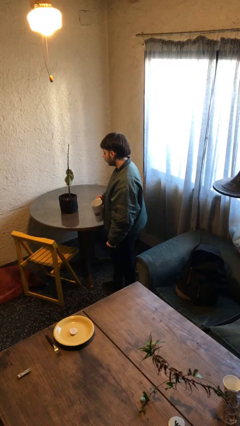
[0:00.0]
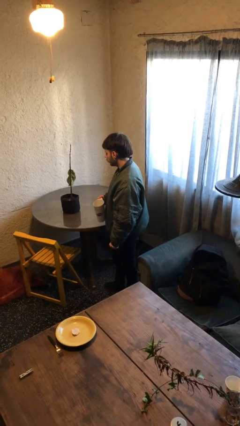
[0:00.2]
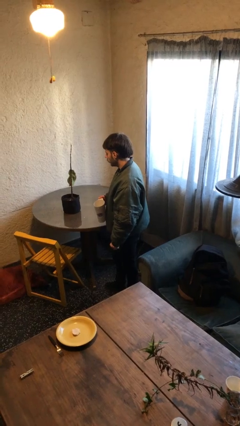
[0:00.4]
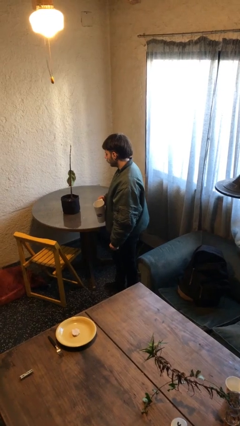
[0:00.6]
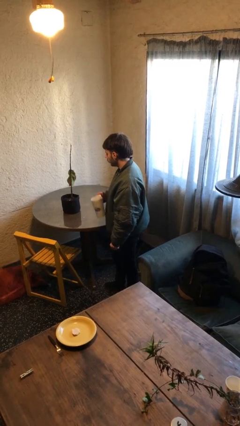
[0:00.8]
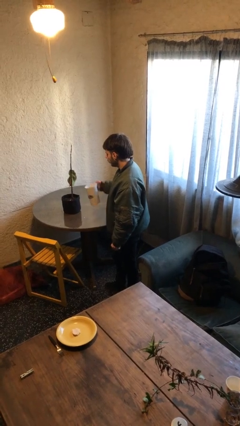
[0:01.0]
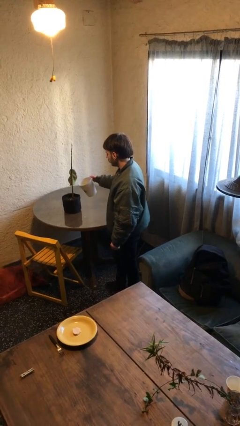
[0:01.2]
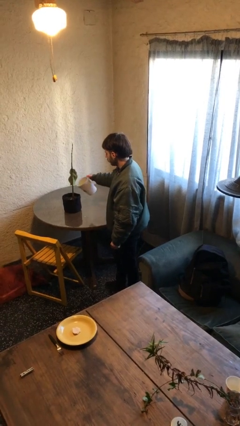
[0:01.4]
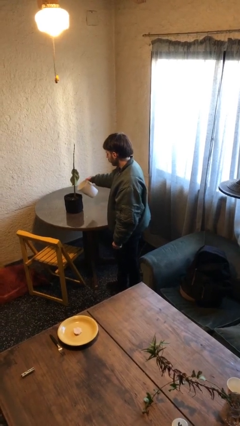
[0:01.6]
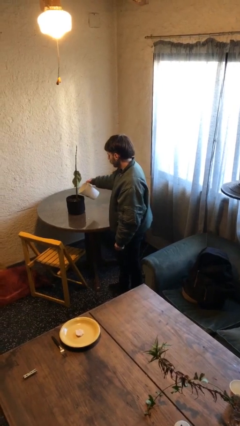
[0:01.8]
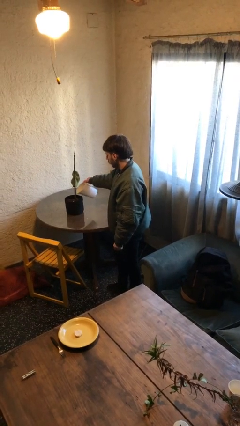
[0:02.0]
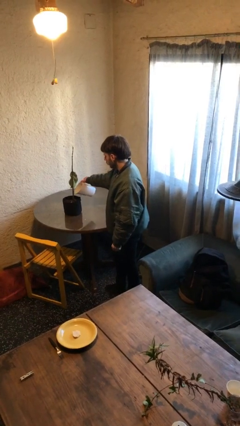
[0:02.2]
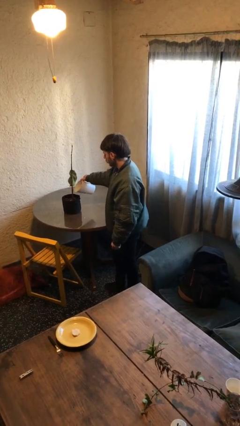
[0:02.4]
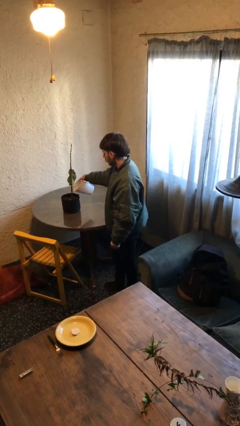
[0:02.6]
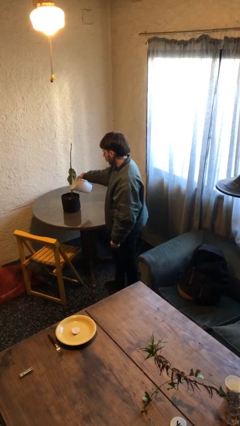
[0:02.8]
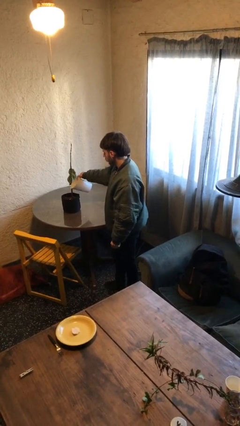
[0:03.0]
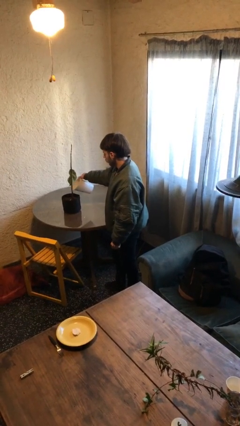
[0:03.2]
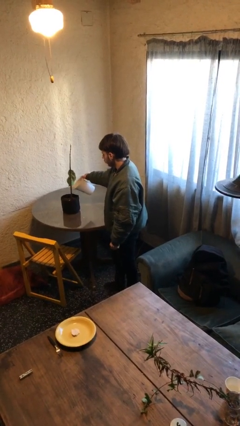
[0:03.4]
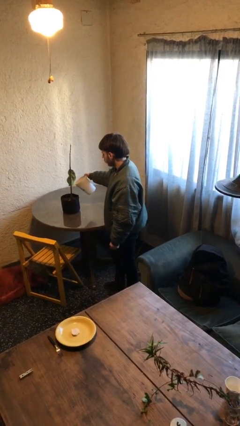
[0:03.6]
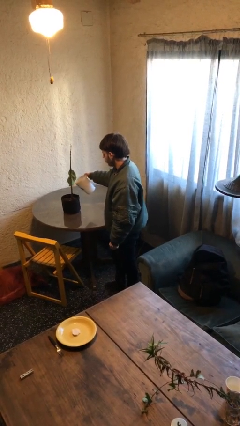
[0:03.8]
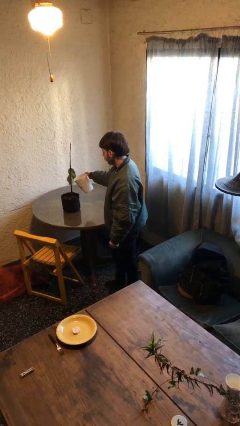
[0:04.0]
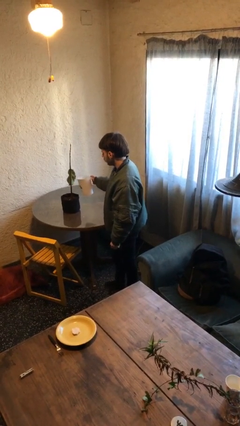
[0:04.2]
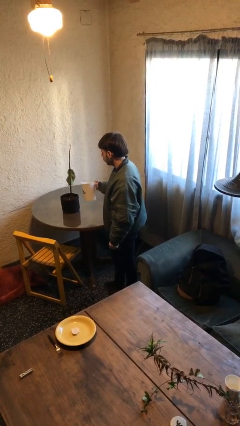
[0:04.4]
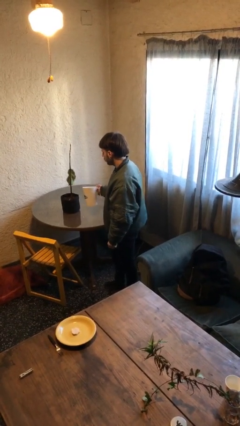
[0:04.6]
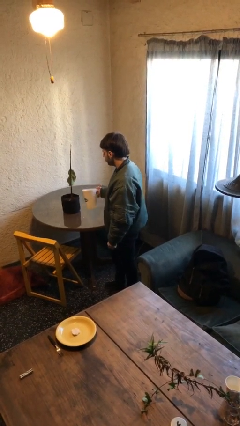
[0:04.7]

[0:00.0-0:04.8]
person waters houseplant

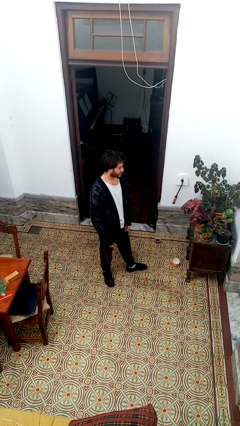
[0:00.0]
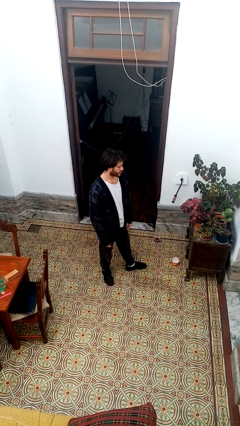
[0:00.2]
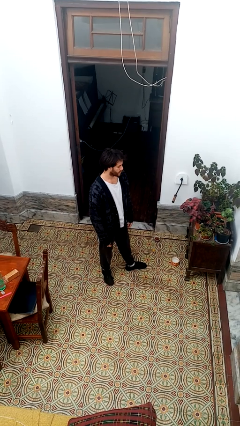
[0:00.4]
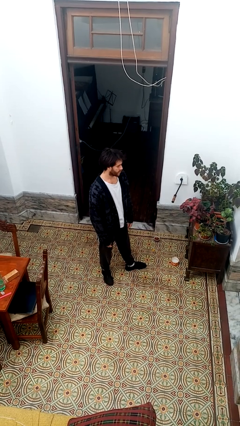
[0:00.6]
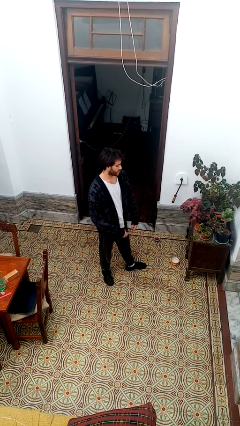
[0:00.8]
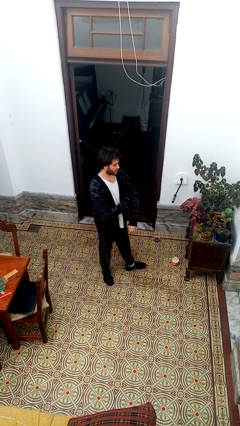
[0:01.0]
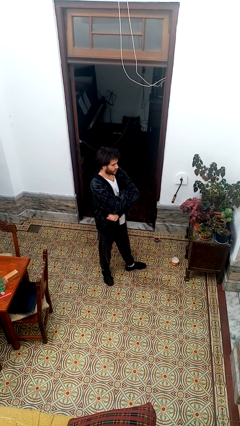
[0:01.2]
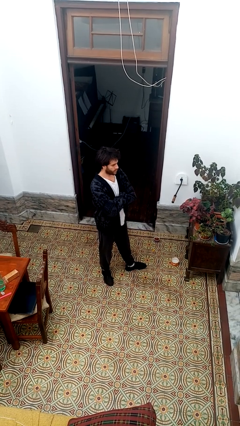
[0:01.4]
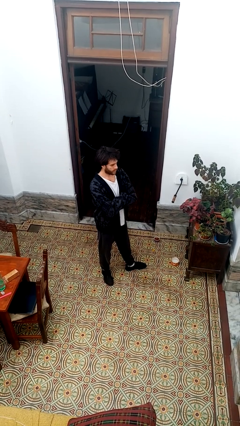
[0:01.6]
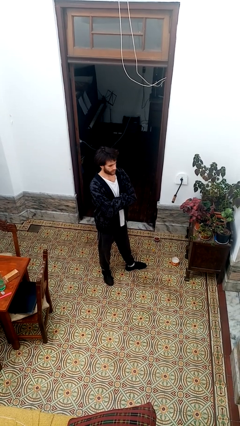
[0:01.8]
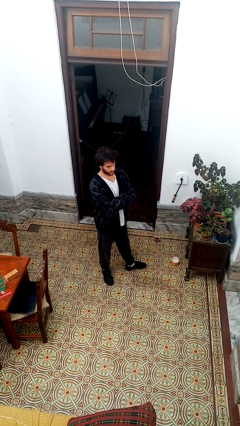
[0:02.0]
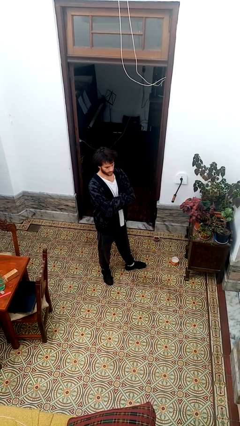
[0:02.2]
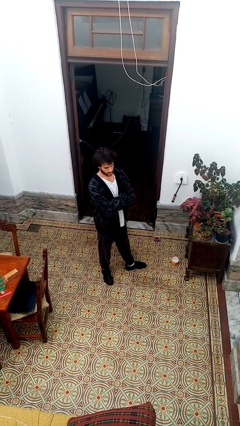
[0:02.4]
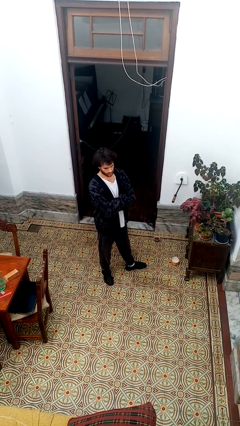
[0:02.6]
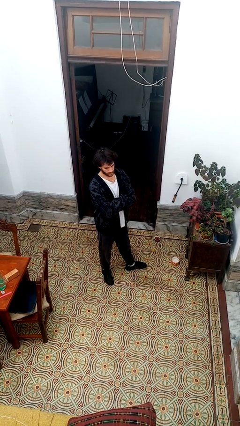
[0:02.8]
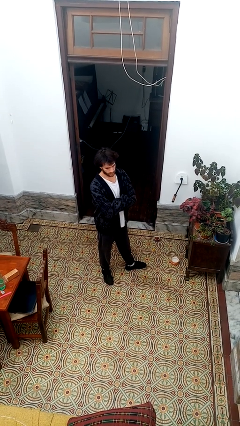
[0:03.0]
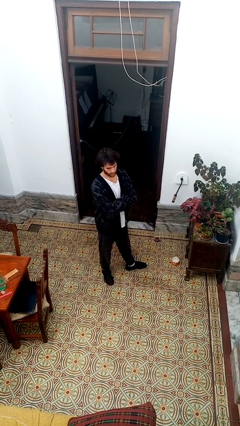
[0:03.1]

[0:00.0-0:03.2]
person crosses arms

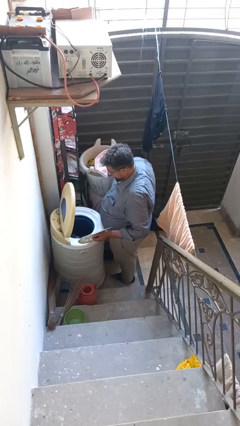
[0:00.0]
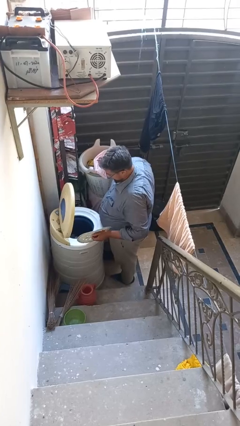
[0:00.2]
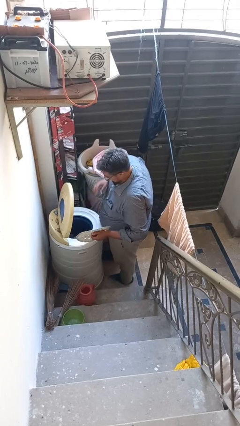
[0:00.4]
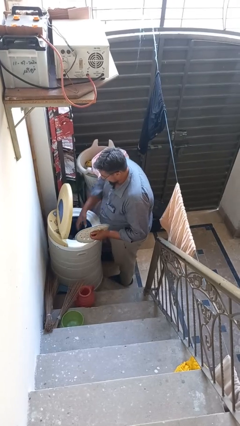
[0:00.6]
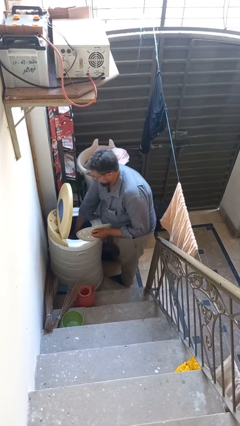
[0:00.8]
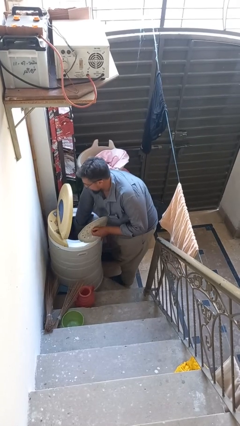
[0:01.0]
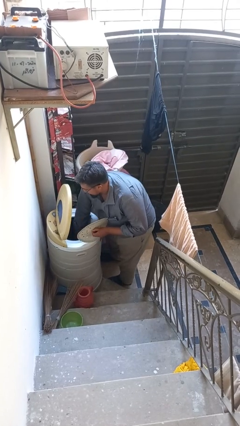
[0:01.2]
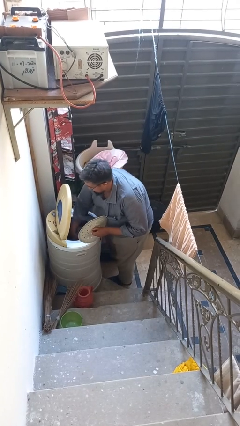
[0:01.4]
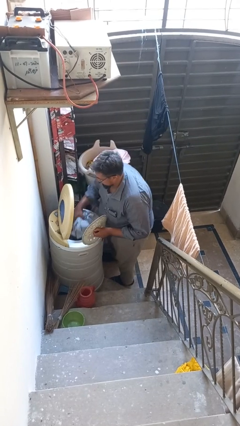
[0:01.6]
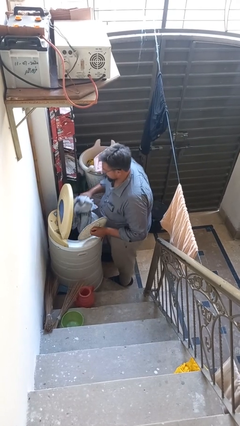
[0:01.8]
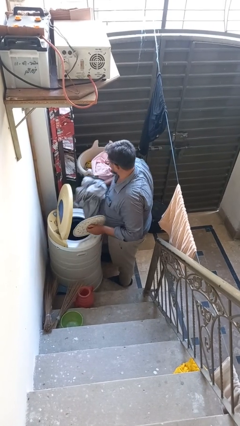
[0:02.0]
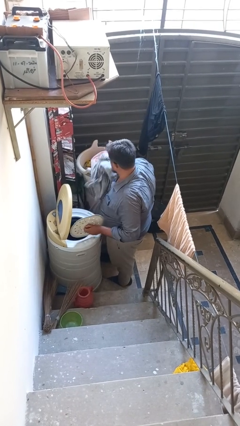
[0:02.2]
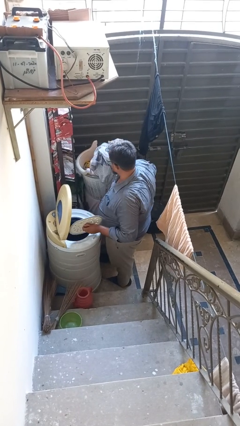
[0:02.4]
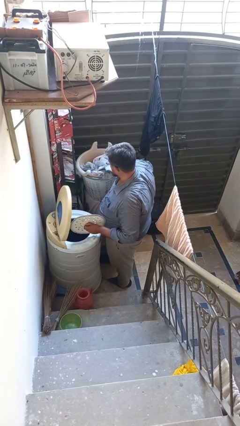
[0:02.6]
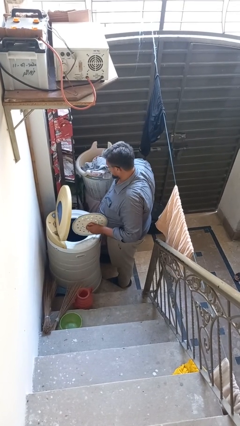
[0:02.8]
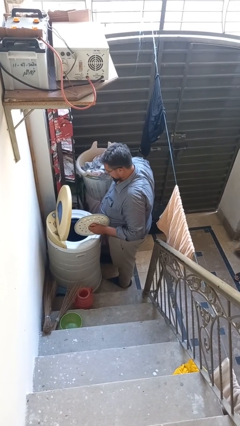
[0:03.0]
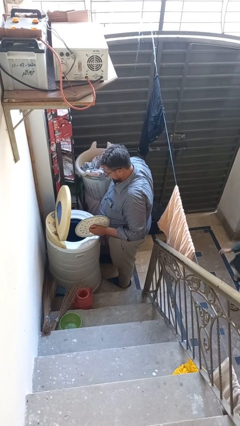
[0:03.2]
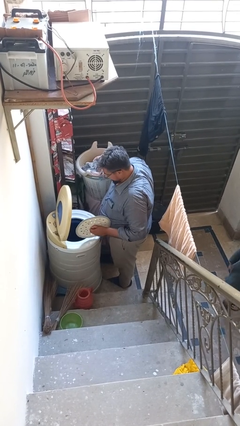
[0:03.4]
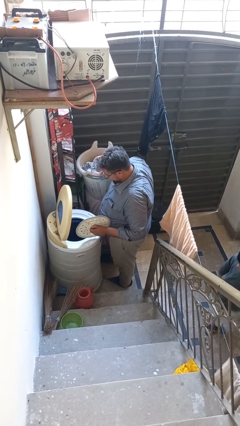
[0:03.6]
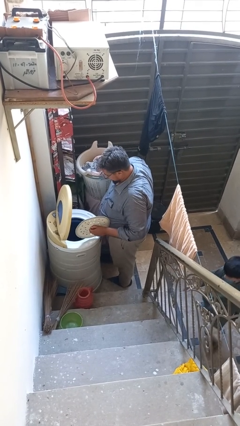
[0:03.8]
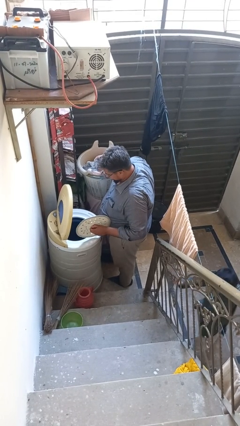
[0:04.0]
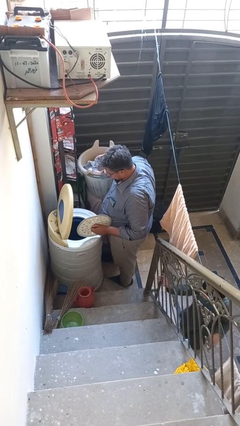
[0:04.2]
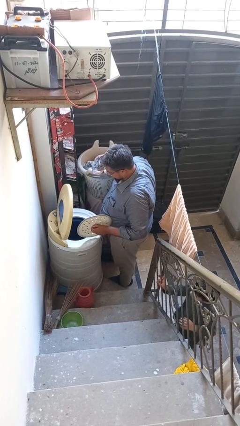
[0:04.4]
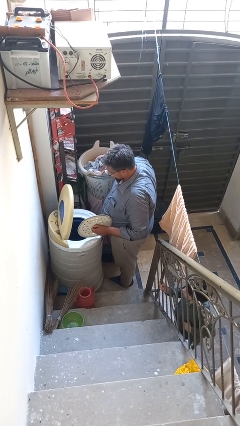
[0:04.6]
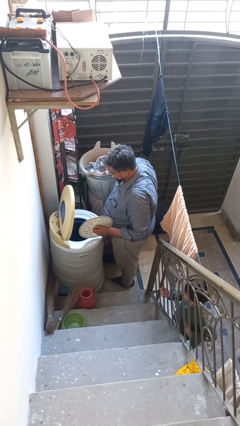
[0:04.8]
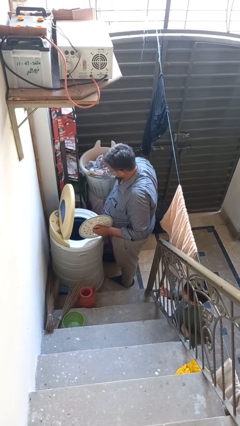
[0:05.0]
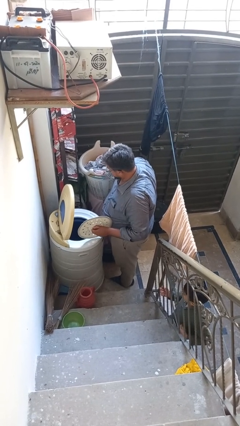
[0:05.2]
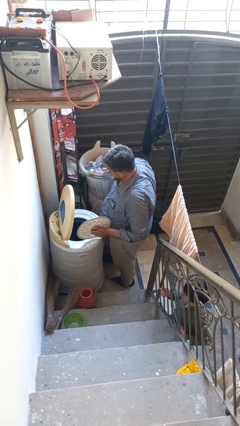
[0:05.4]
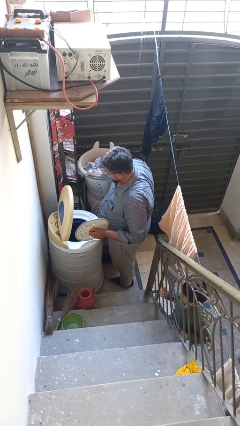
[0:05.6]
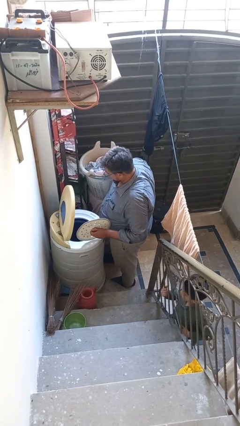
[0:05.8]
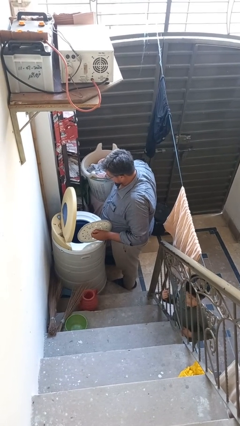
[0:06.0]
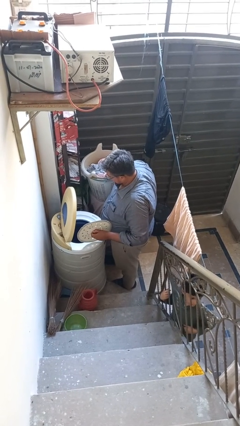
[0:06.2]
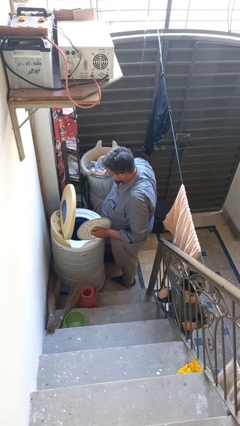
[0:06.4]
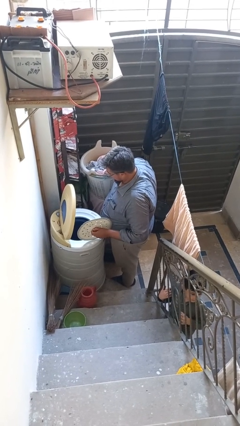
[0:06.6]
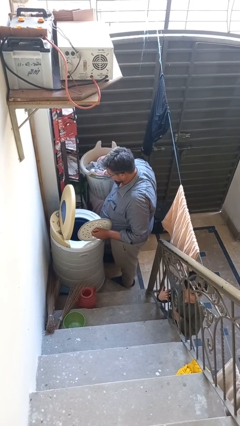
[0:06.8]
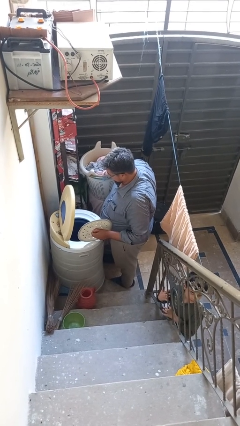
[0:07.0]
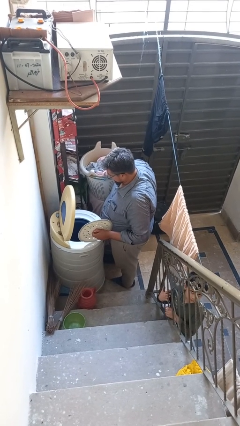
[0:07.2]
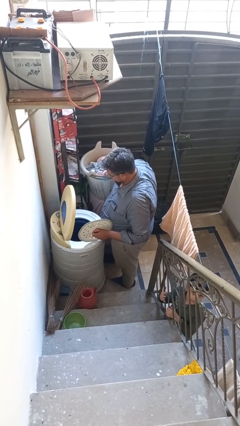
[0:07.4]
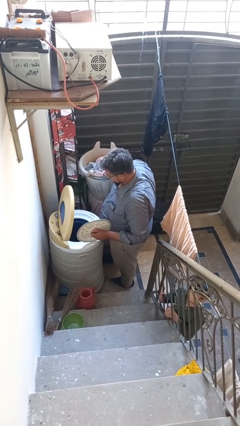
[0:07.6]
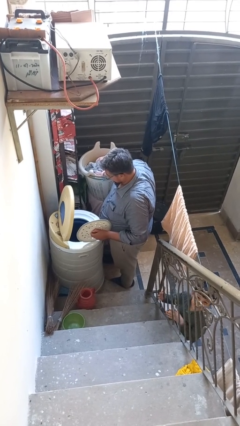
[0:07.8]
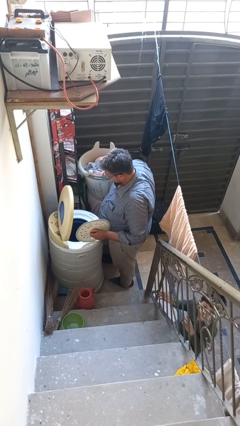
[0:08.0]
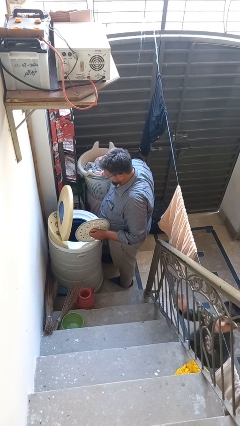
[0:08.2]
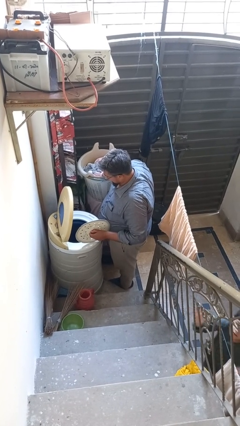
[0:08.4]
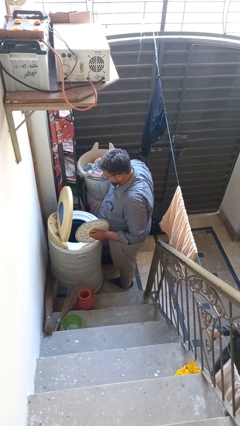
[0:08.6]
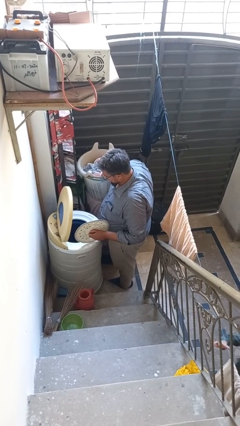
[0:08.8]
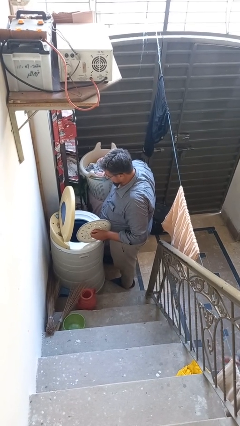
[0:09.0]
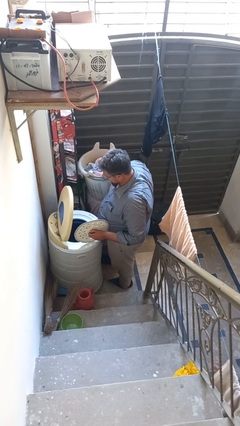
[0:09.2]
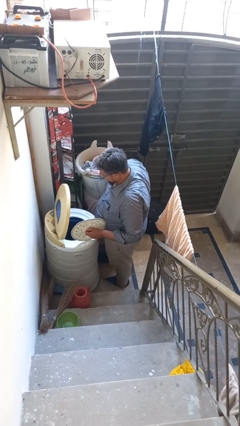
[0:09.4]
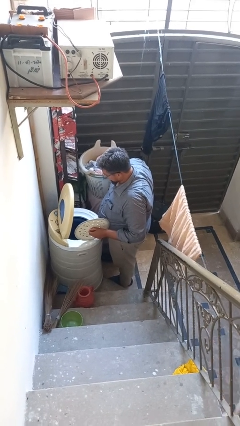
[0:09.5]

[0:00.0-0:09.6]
person unloads clotheswasher

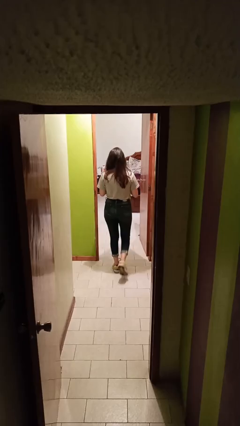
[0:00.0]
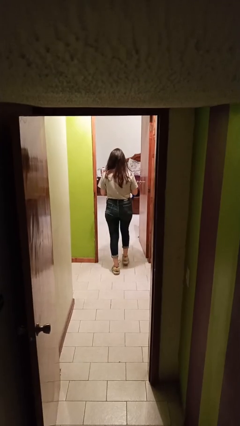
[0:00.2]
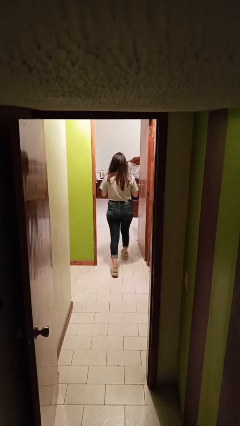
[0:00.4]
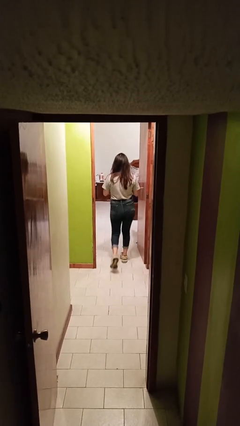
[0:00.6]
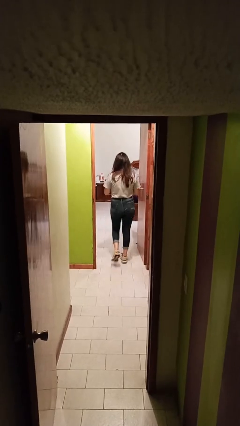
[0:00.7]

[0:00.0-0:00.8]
person exits scene through structure
